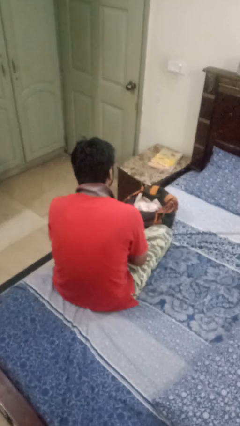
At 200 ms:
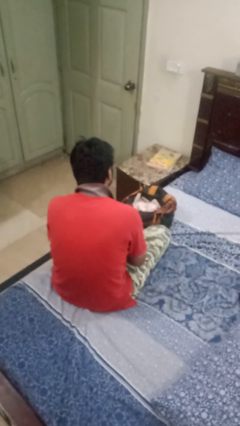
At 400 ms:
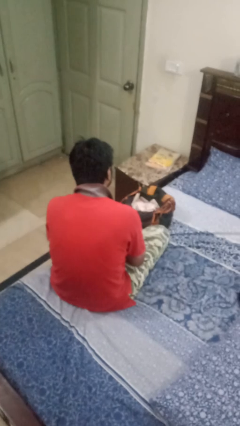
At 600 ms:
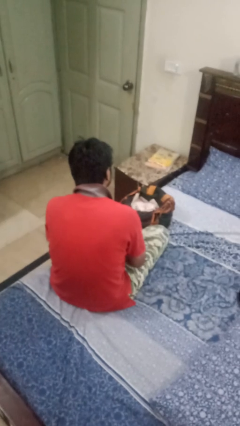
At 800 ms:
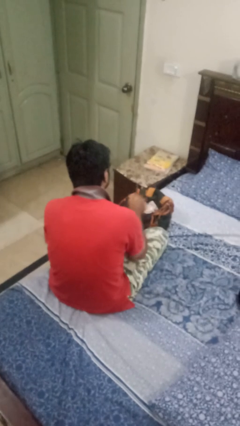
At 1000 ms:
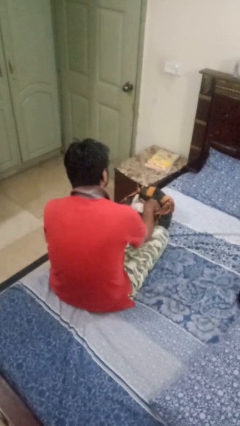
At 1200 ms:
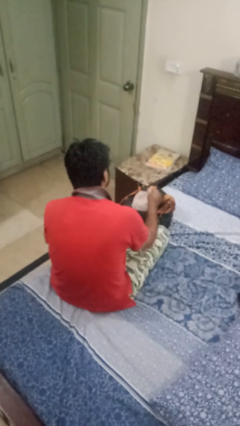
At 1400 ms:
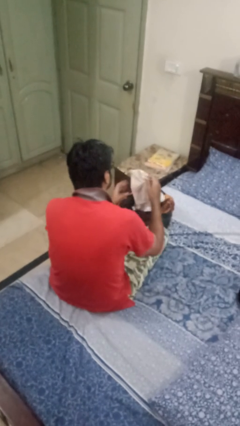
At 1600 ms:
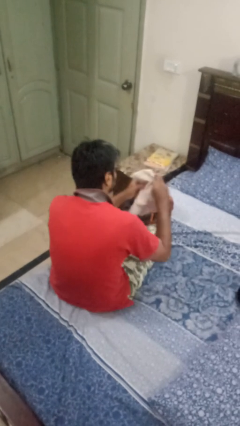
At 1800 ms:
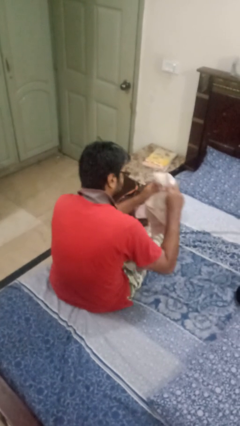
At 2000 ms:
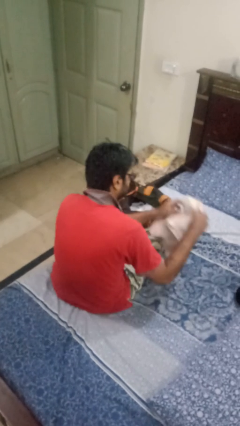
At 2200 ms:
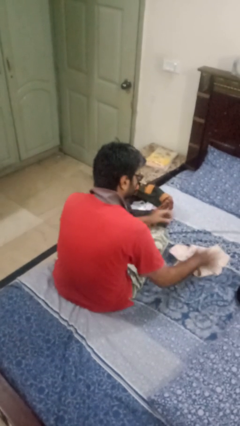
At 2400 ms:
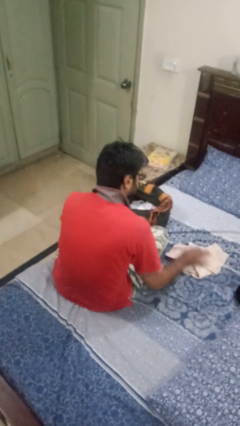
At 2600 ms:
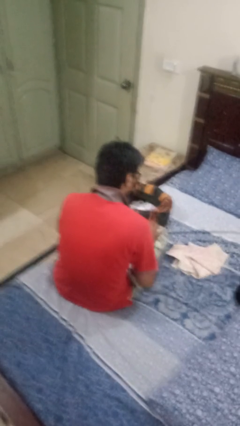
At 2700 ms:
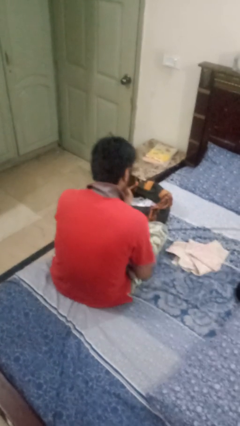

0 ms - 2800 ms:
person takes object from bag

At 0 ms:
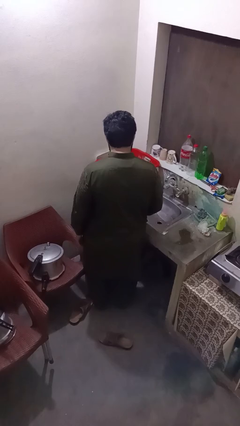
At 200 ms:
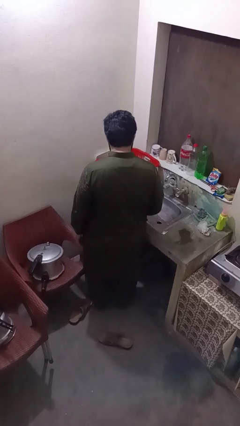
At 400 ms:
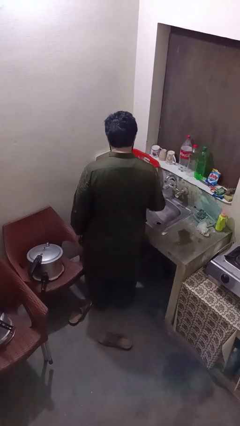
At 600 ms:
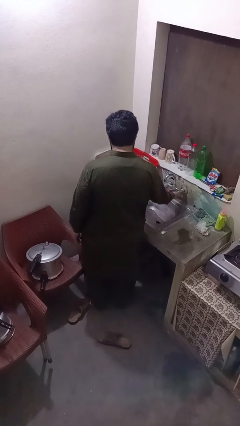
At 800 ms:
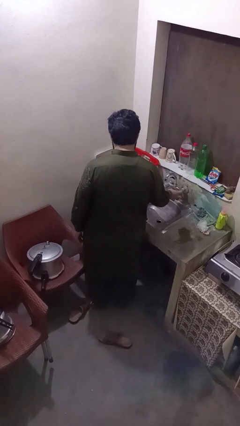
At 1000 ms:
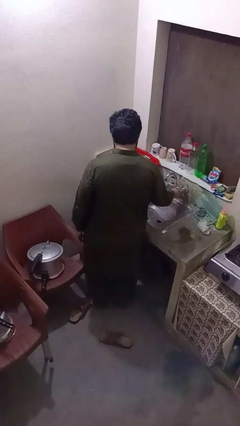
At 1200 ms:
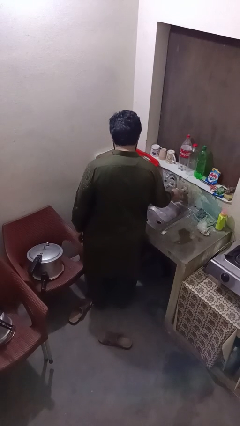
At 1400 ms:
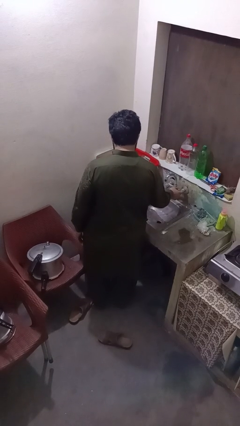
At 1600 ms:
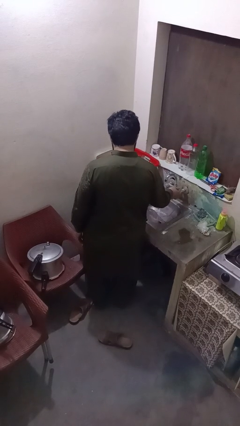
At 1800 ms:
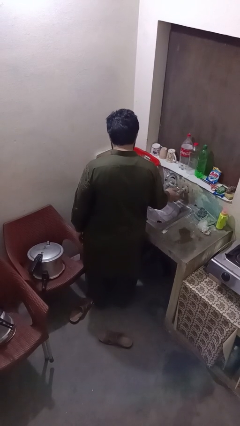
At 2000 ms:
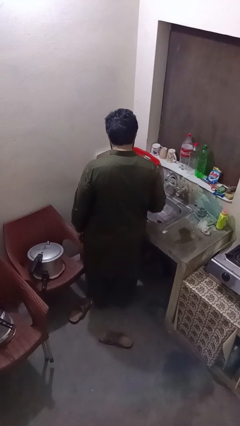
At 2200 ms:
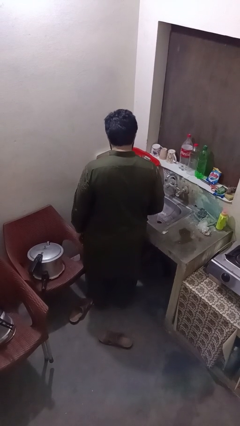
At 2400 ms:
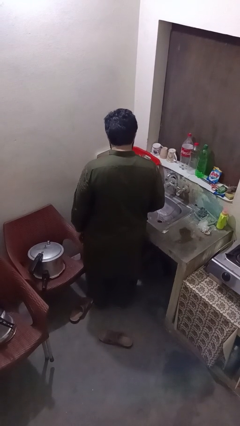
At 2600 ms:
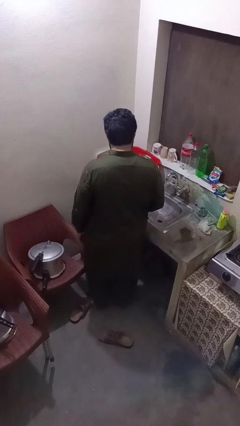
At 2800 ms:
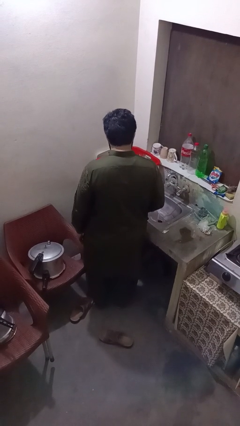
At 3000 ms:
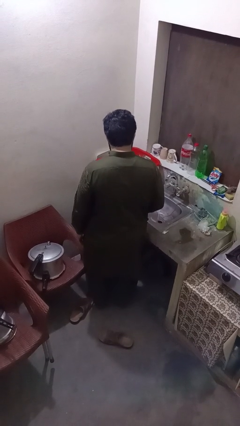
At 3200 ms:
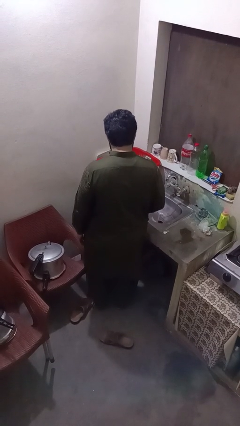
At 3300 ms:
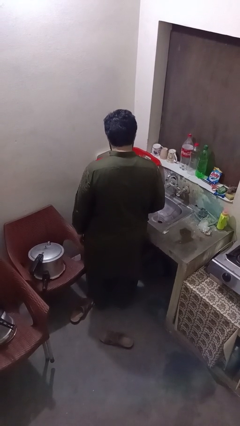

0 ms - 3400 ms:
person turns on faucet

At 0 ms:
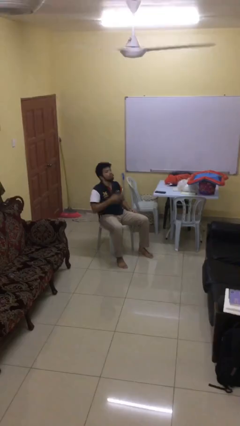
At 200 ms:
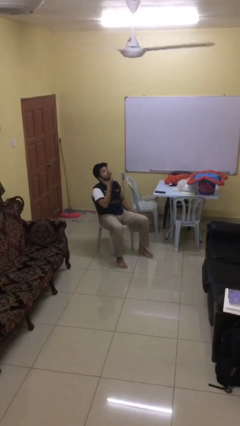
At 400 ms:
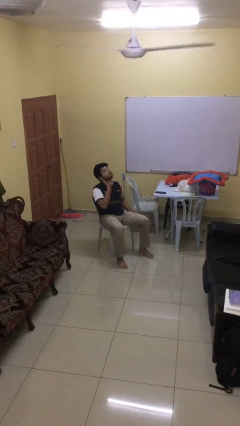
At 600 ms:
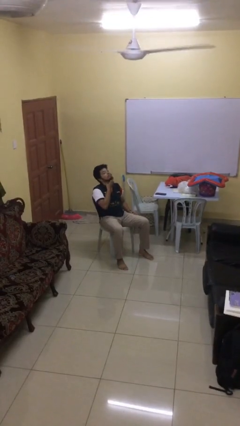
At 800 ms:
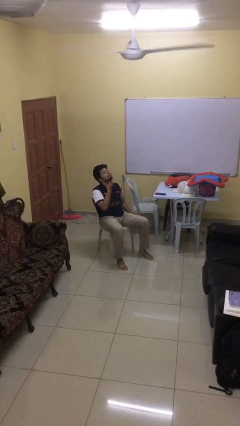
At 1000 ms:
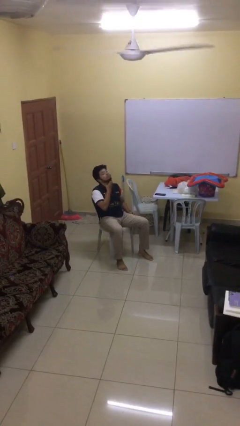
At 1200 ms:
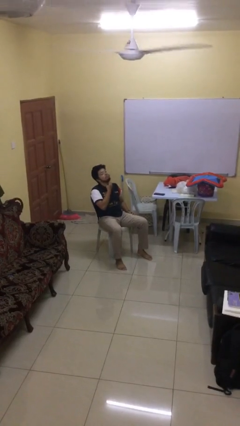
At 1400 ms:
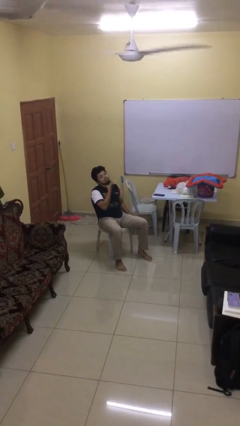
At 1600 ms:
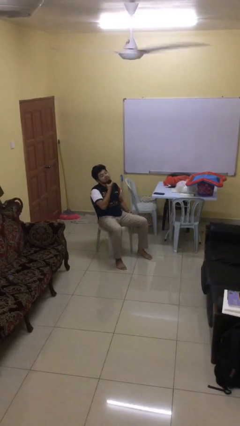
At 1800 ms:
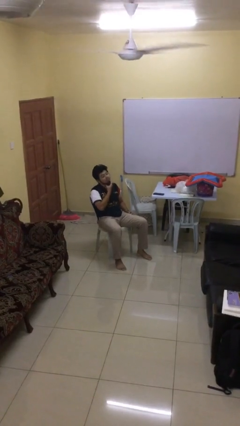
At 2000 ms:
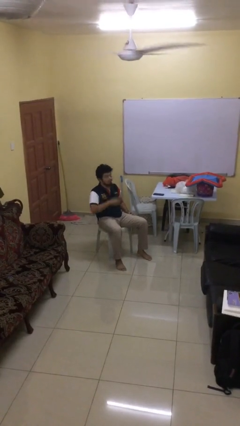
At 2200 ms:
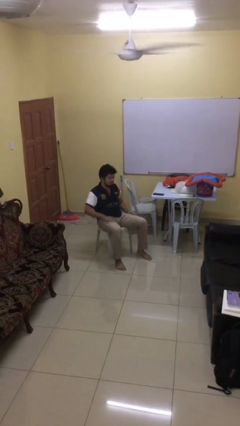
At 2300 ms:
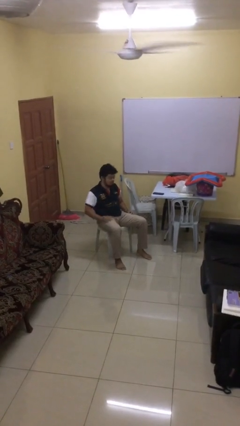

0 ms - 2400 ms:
person scratches face

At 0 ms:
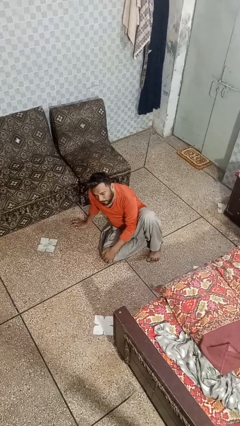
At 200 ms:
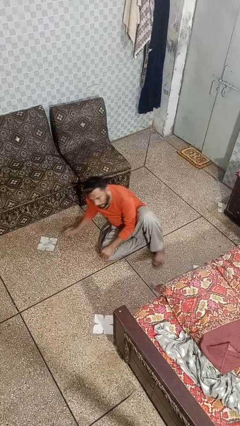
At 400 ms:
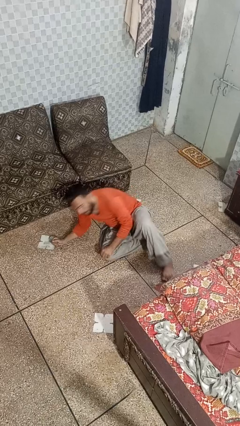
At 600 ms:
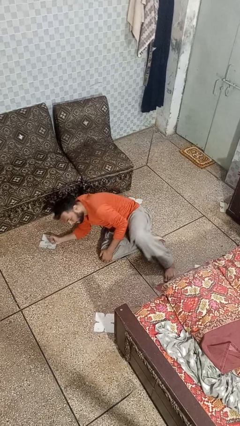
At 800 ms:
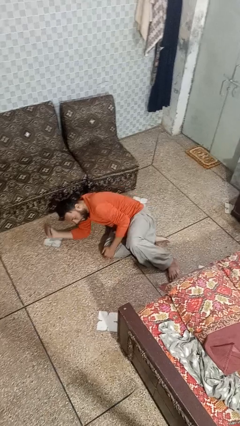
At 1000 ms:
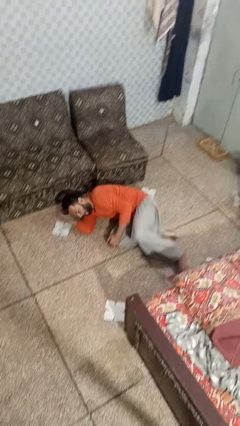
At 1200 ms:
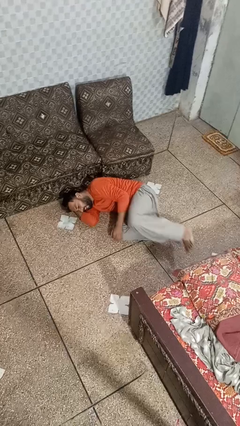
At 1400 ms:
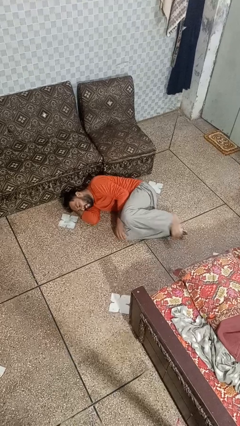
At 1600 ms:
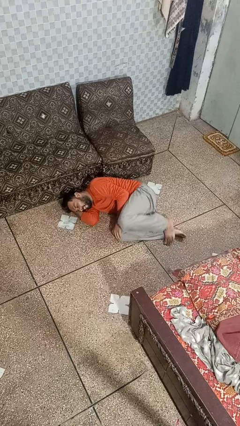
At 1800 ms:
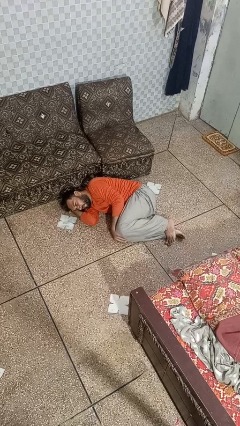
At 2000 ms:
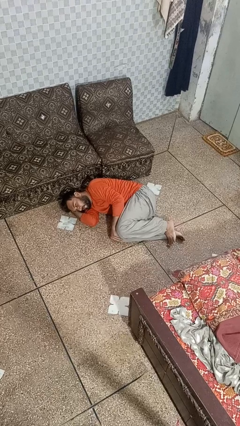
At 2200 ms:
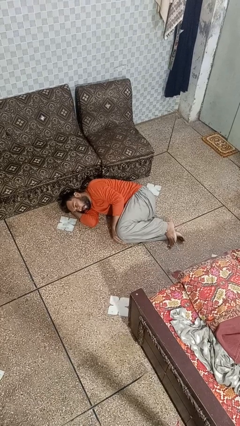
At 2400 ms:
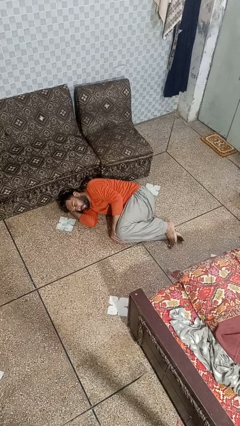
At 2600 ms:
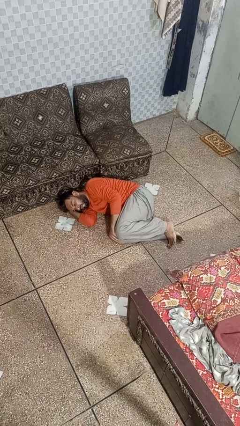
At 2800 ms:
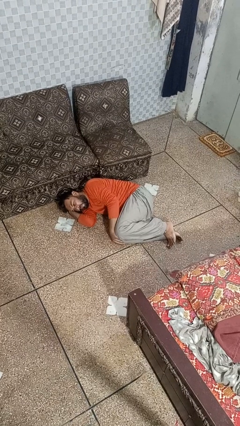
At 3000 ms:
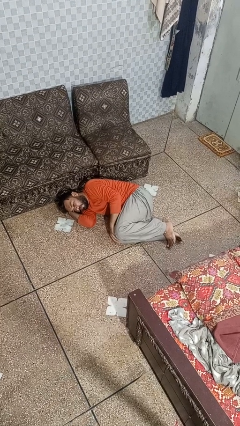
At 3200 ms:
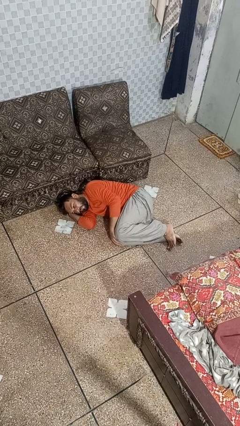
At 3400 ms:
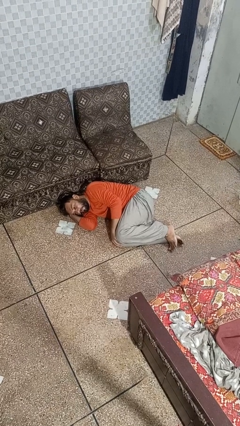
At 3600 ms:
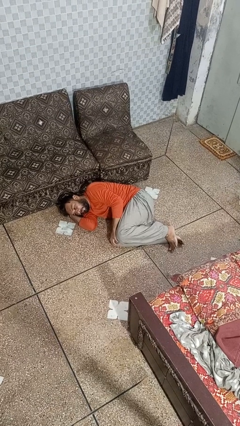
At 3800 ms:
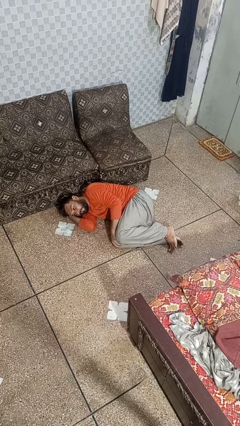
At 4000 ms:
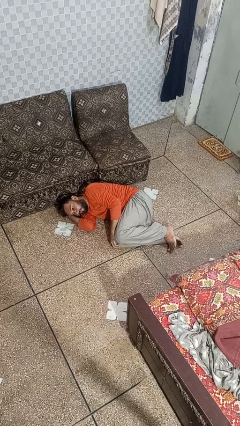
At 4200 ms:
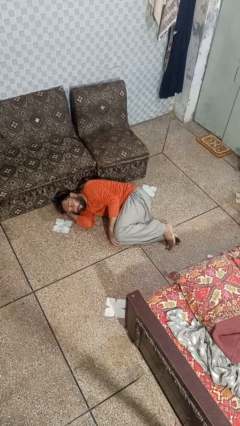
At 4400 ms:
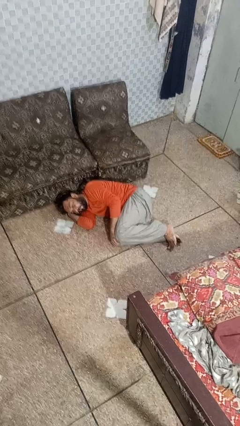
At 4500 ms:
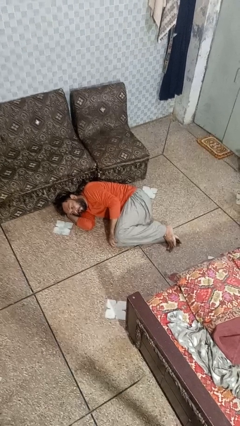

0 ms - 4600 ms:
person lies down on floor

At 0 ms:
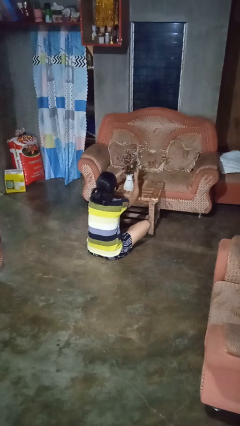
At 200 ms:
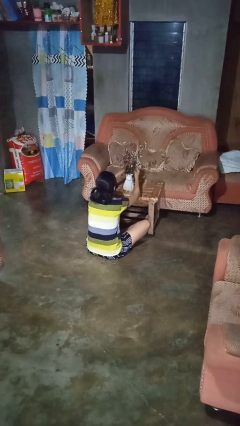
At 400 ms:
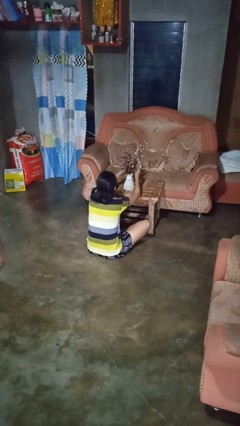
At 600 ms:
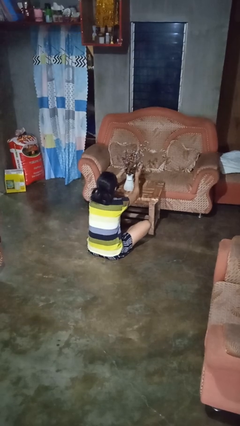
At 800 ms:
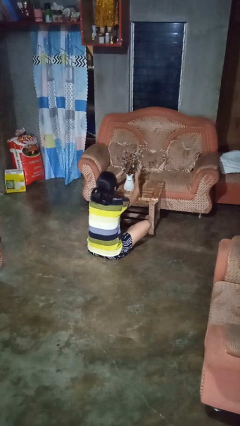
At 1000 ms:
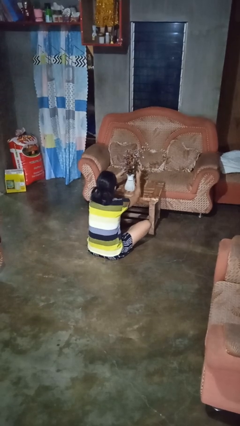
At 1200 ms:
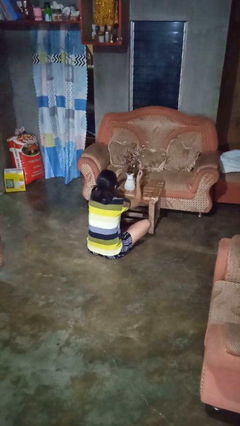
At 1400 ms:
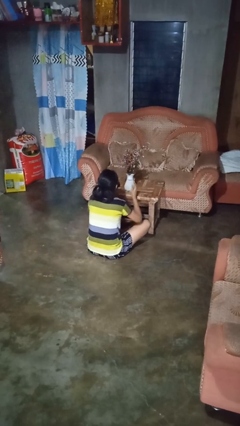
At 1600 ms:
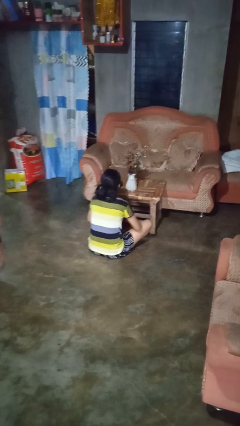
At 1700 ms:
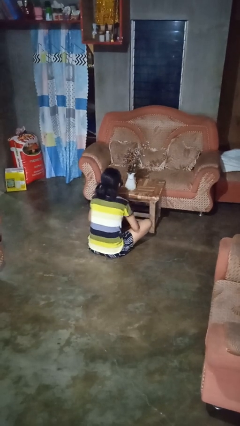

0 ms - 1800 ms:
person arranges flowers in vase

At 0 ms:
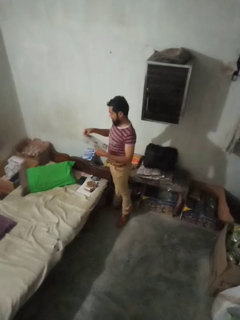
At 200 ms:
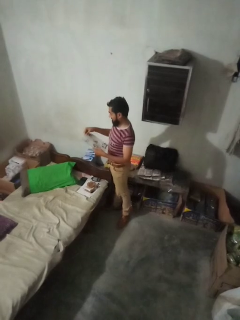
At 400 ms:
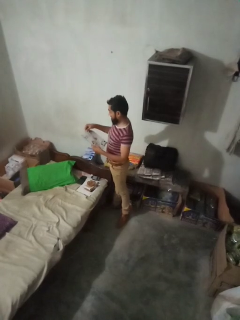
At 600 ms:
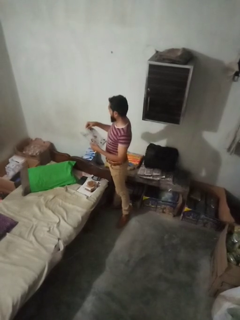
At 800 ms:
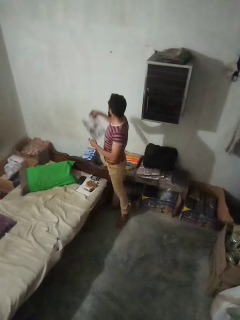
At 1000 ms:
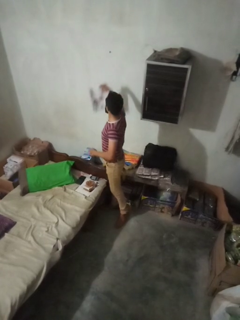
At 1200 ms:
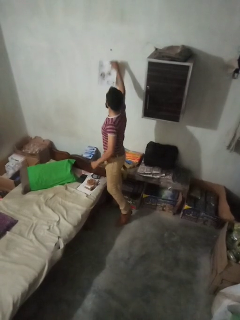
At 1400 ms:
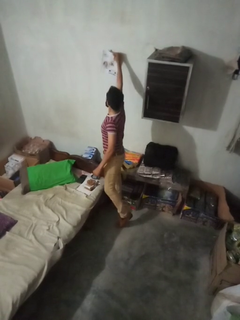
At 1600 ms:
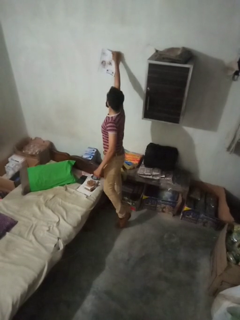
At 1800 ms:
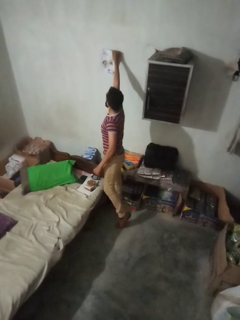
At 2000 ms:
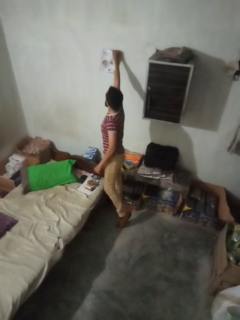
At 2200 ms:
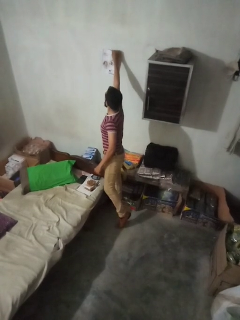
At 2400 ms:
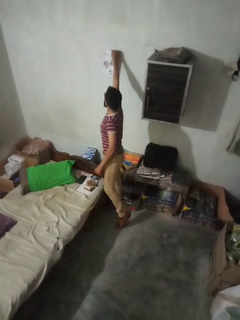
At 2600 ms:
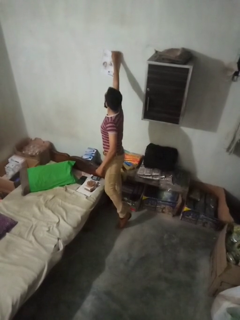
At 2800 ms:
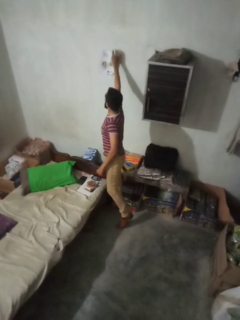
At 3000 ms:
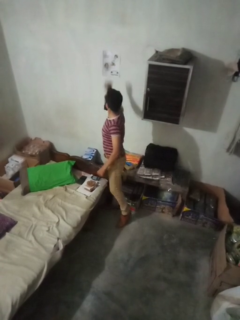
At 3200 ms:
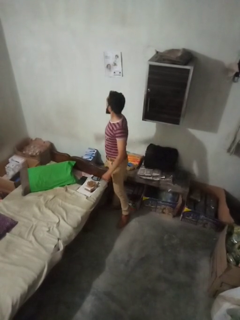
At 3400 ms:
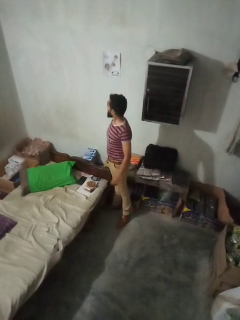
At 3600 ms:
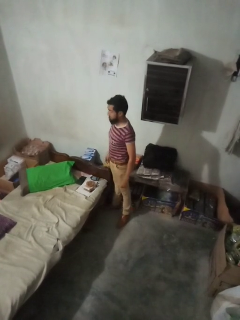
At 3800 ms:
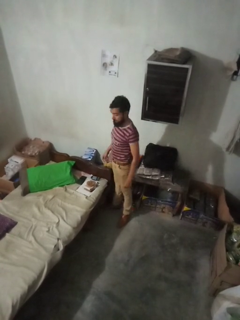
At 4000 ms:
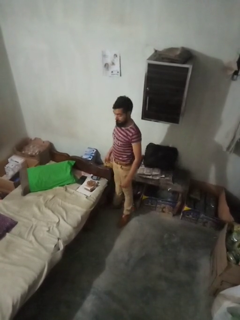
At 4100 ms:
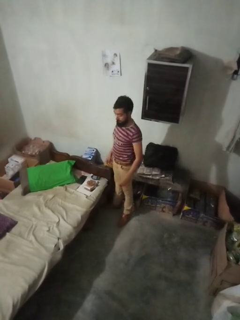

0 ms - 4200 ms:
person puts up picture frame
